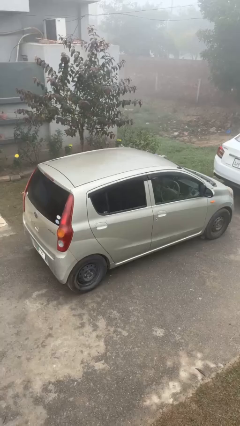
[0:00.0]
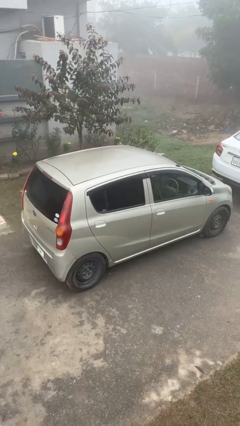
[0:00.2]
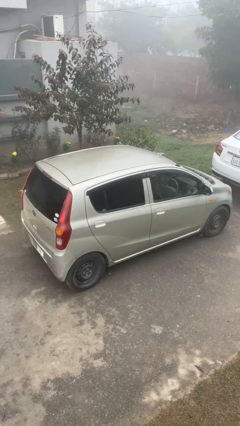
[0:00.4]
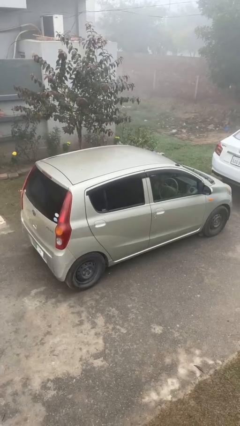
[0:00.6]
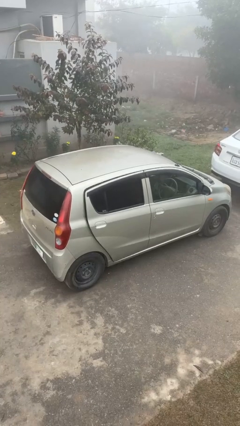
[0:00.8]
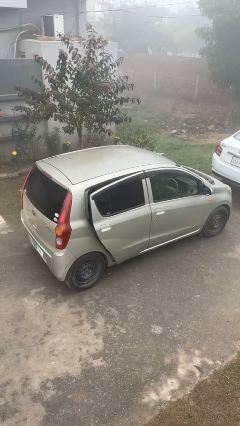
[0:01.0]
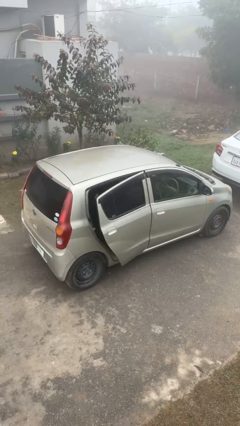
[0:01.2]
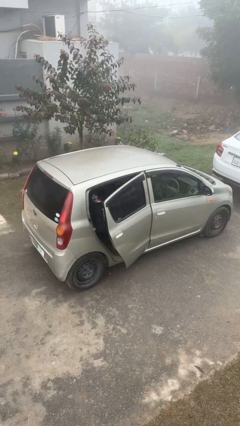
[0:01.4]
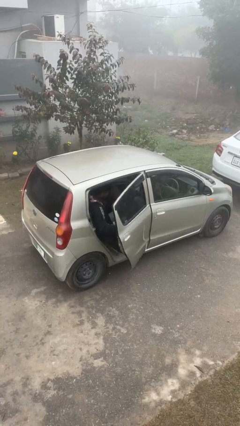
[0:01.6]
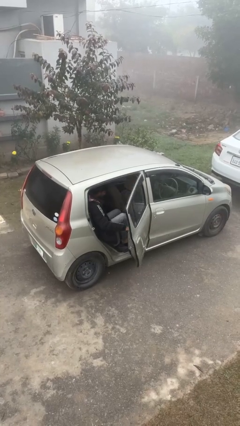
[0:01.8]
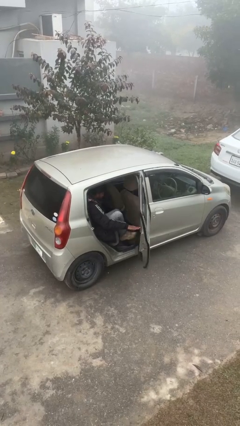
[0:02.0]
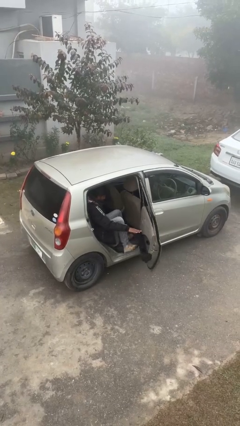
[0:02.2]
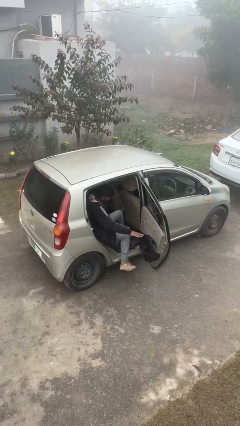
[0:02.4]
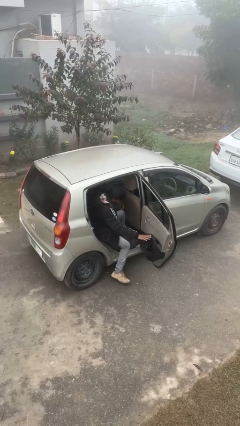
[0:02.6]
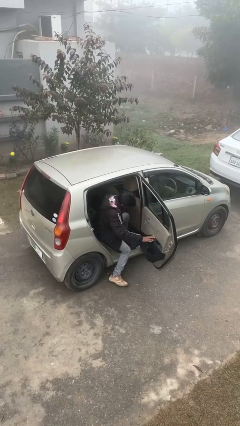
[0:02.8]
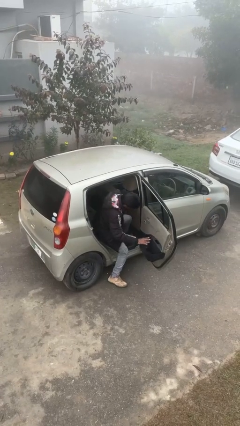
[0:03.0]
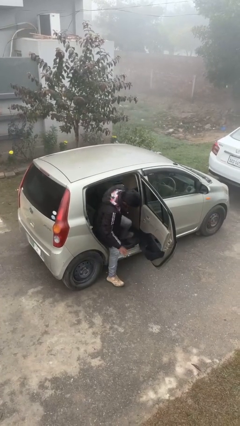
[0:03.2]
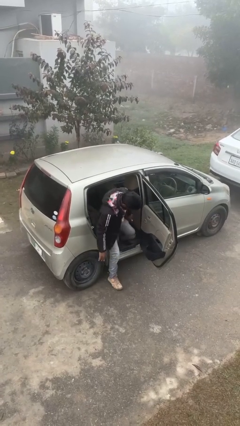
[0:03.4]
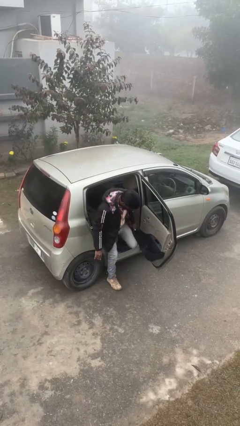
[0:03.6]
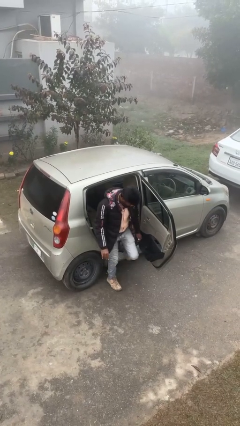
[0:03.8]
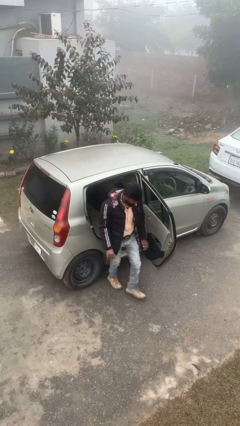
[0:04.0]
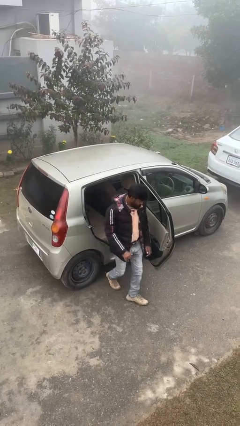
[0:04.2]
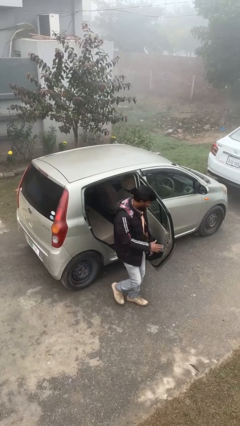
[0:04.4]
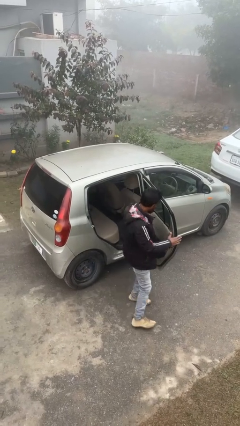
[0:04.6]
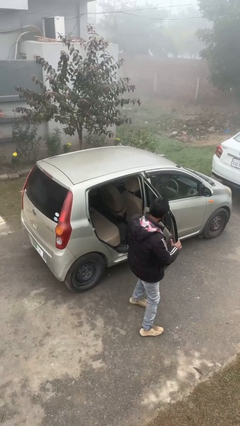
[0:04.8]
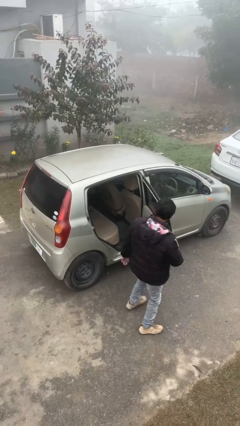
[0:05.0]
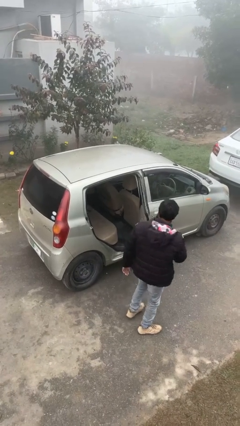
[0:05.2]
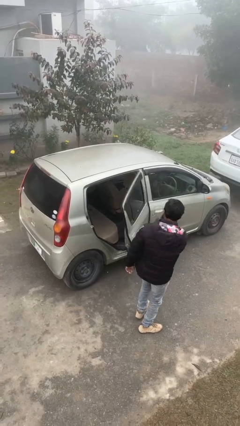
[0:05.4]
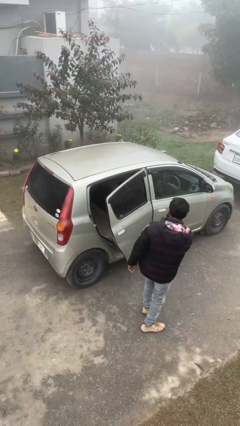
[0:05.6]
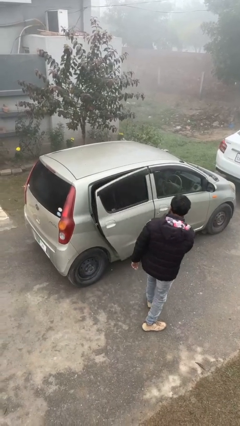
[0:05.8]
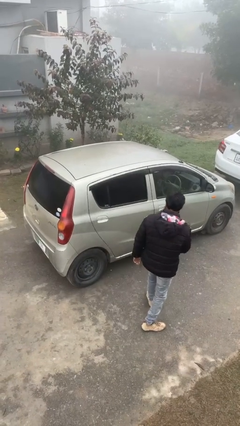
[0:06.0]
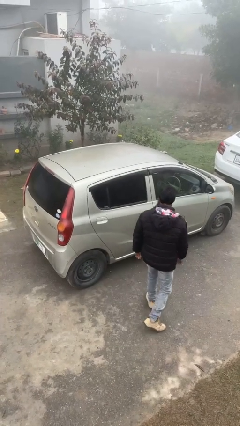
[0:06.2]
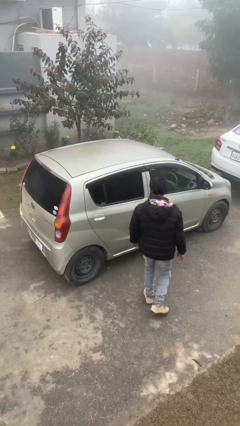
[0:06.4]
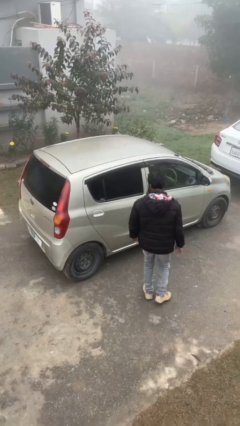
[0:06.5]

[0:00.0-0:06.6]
car drops off person

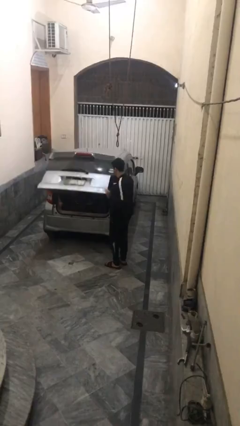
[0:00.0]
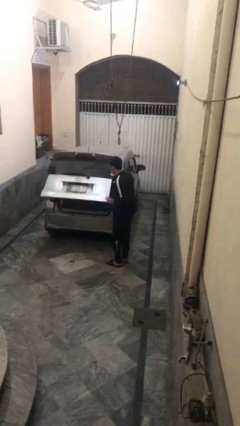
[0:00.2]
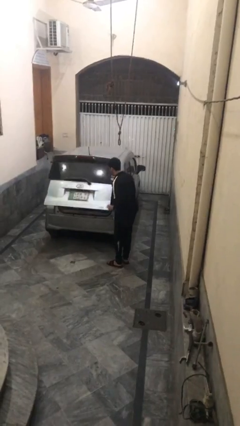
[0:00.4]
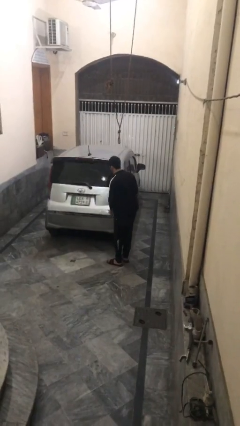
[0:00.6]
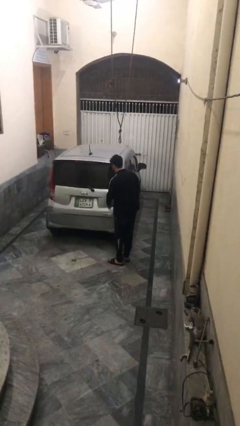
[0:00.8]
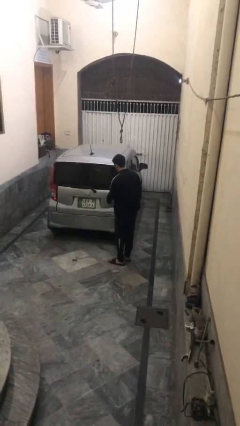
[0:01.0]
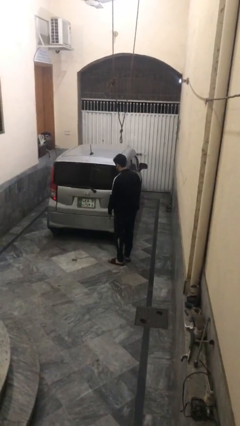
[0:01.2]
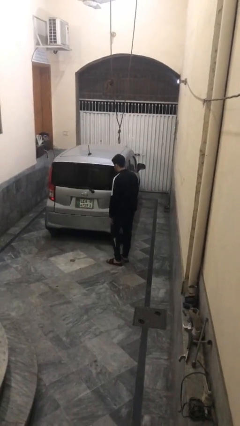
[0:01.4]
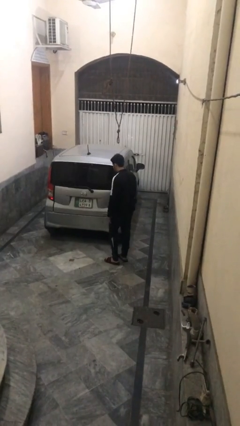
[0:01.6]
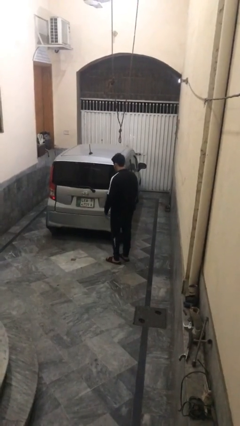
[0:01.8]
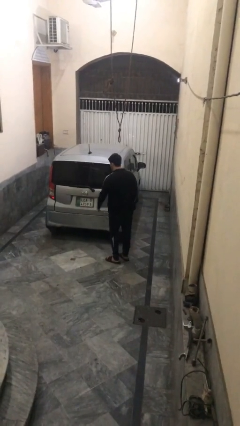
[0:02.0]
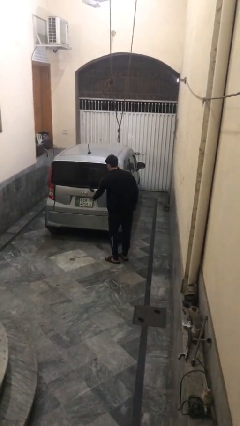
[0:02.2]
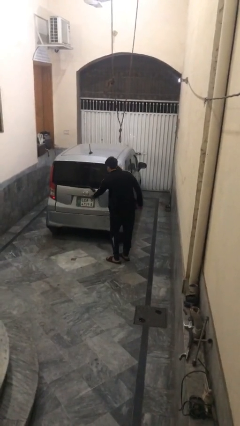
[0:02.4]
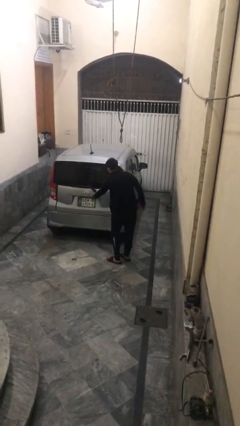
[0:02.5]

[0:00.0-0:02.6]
person closes car trunk

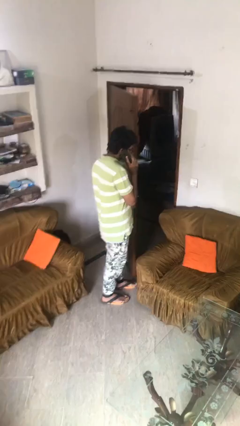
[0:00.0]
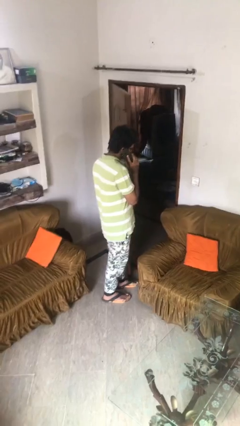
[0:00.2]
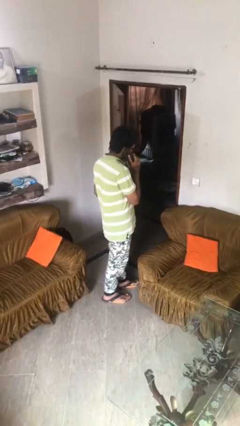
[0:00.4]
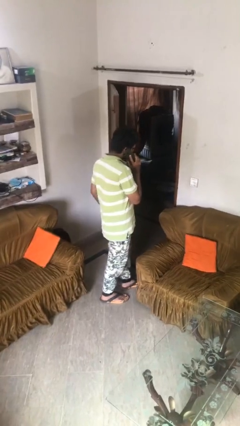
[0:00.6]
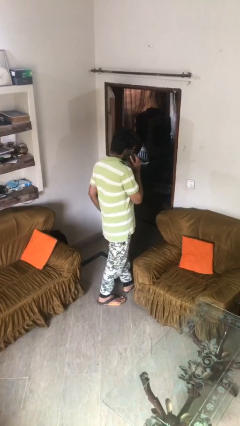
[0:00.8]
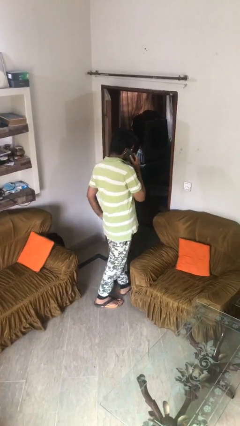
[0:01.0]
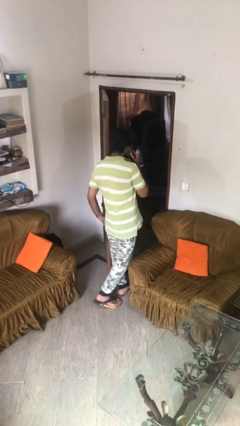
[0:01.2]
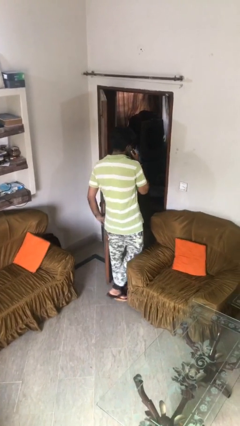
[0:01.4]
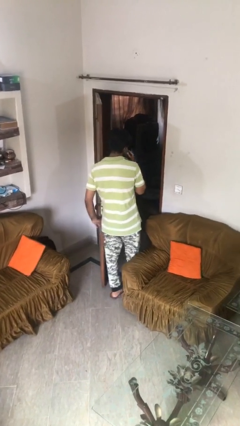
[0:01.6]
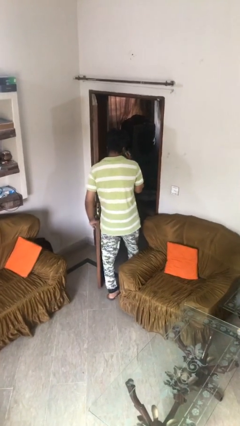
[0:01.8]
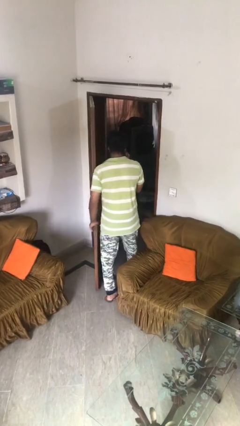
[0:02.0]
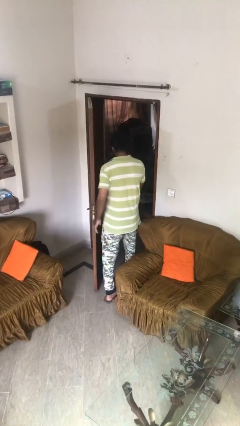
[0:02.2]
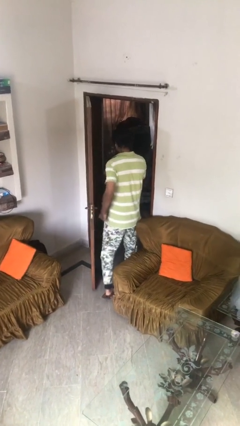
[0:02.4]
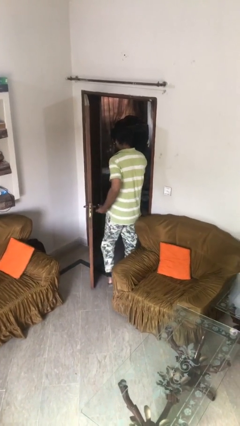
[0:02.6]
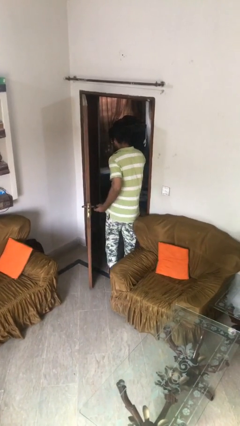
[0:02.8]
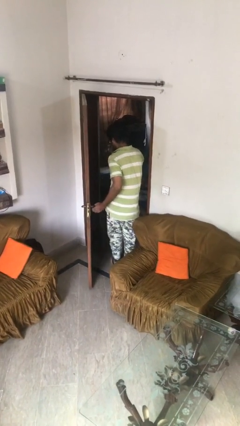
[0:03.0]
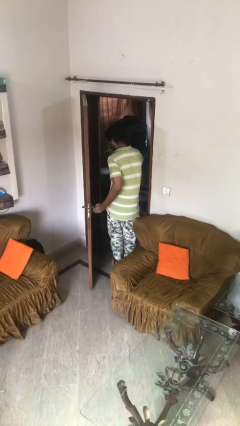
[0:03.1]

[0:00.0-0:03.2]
person exits scene through structure

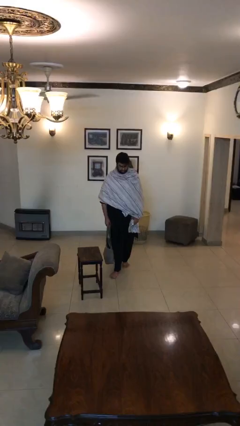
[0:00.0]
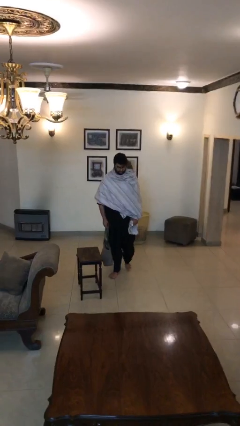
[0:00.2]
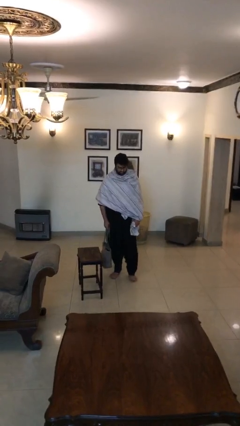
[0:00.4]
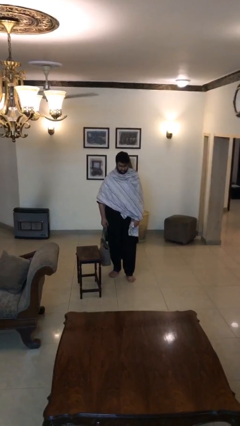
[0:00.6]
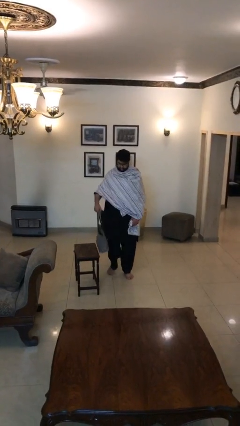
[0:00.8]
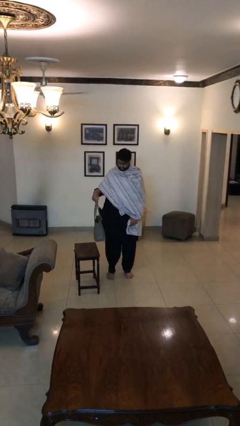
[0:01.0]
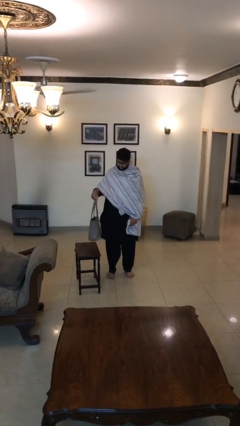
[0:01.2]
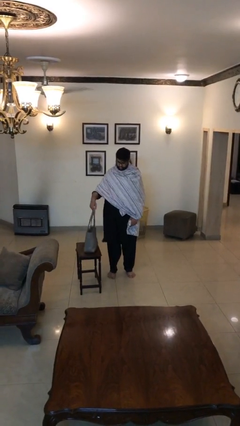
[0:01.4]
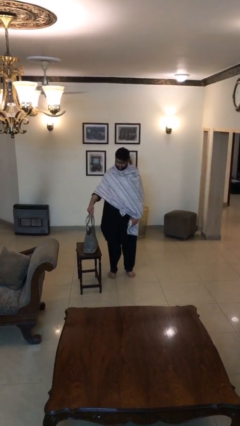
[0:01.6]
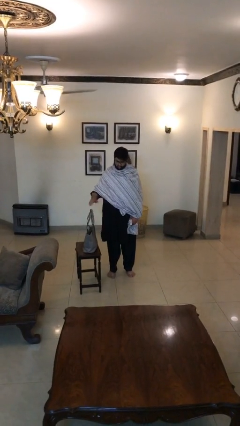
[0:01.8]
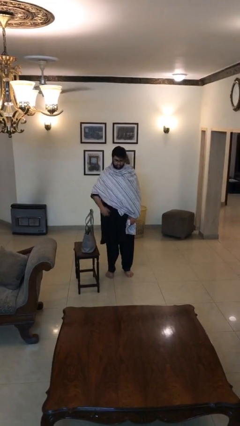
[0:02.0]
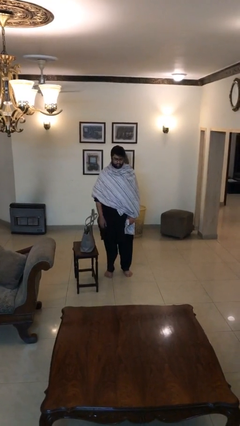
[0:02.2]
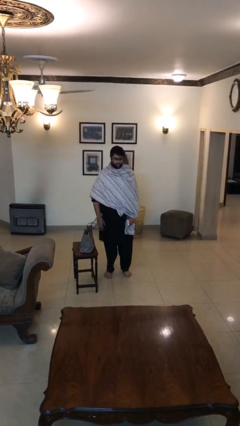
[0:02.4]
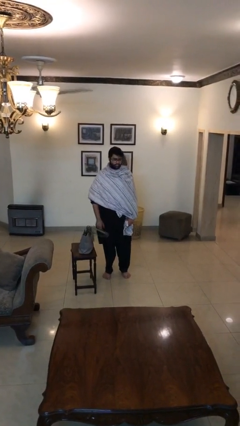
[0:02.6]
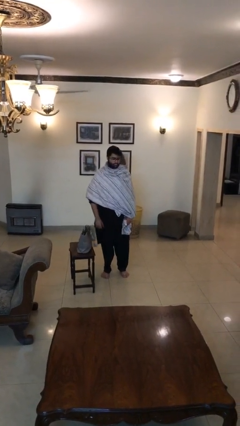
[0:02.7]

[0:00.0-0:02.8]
person puts down object on table

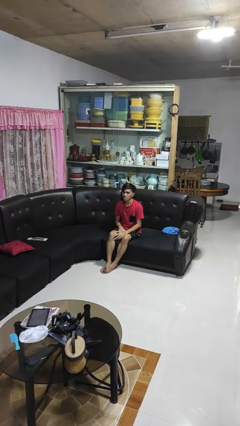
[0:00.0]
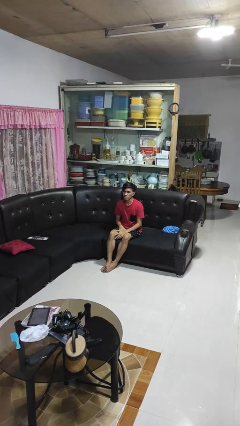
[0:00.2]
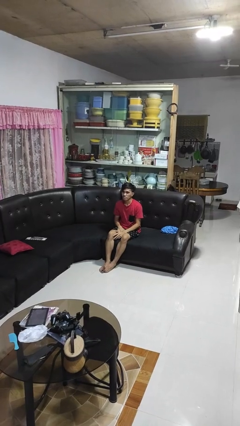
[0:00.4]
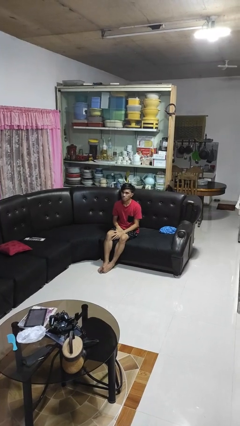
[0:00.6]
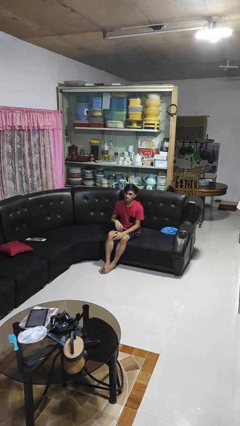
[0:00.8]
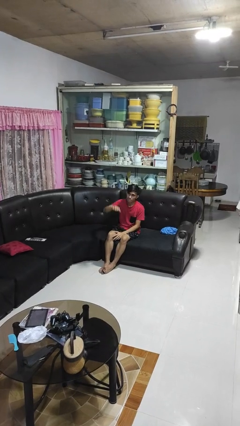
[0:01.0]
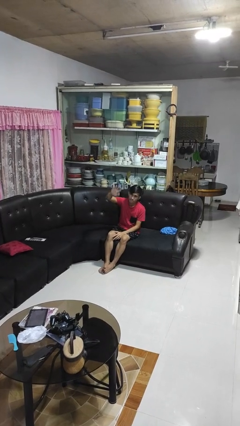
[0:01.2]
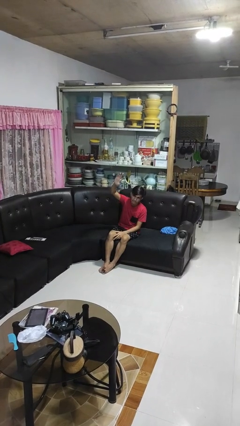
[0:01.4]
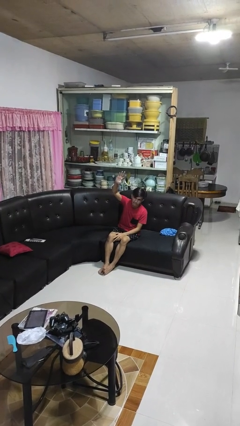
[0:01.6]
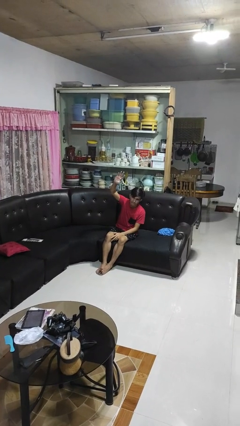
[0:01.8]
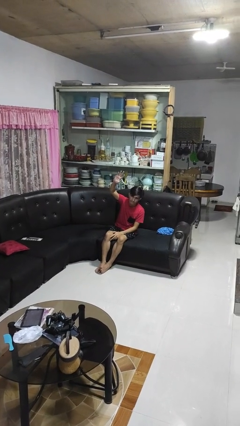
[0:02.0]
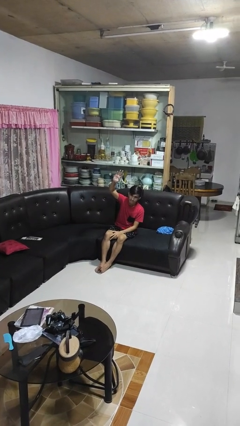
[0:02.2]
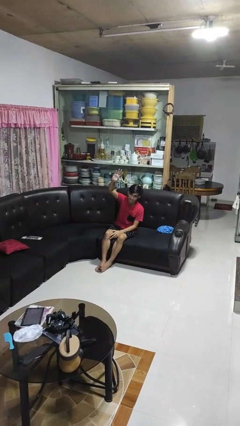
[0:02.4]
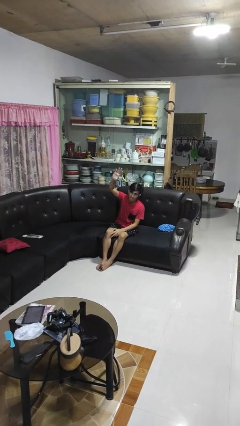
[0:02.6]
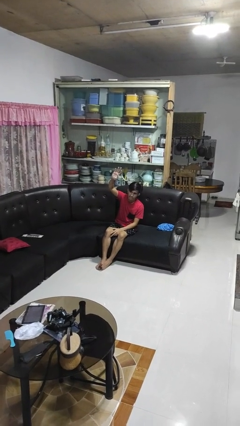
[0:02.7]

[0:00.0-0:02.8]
person gestures raise hand
